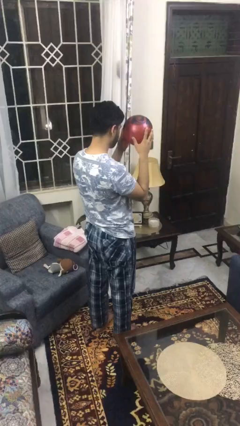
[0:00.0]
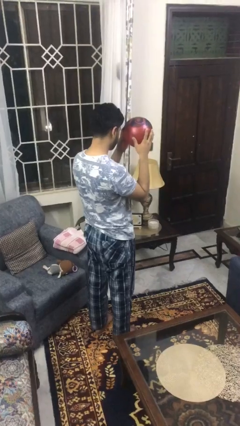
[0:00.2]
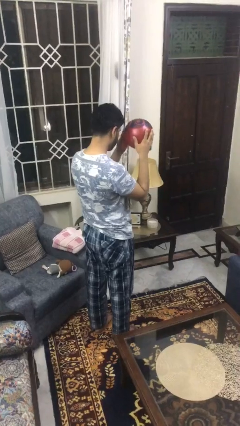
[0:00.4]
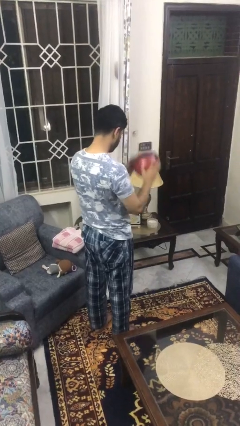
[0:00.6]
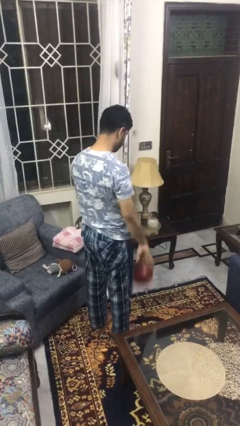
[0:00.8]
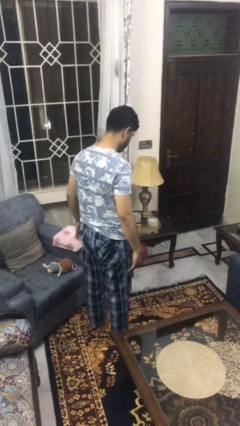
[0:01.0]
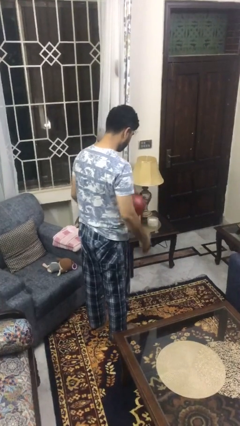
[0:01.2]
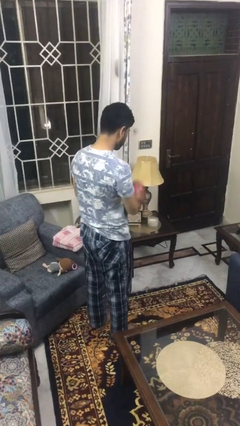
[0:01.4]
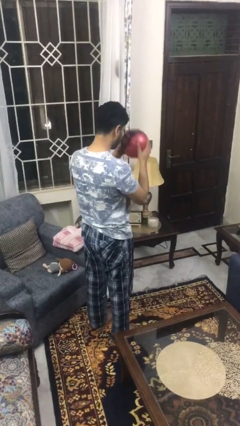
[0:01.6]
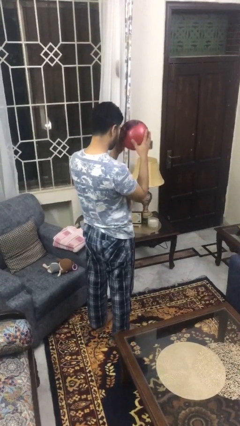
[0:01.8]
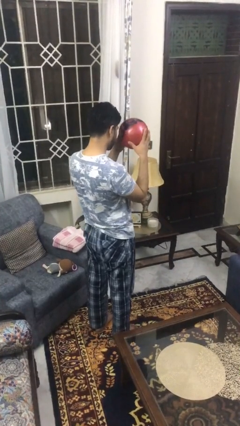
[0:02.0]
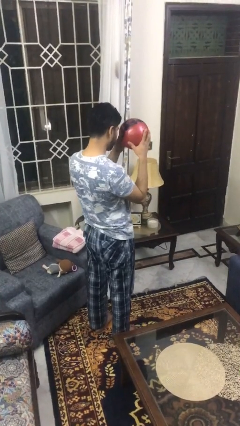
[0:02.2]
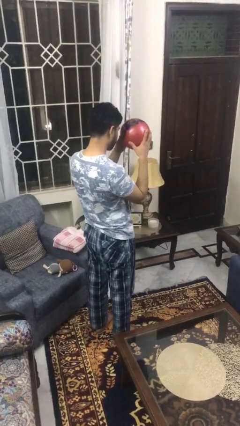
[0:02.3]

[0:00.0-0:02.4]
person bounces ball on floor

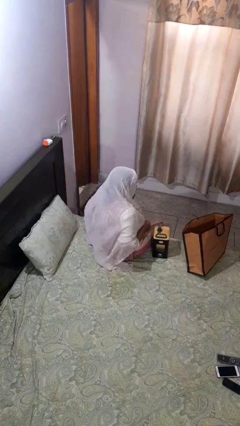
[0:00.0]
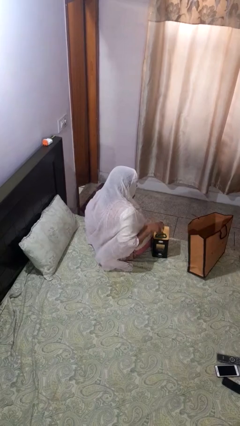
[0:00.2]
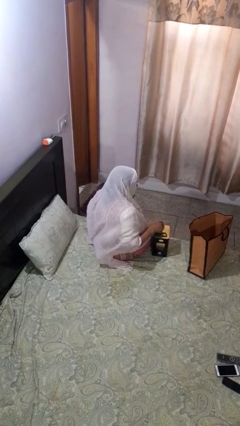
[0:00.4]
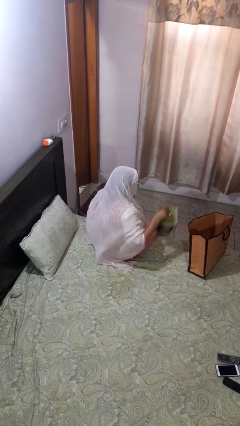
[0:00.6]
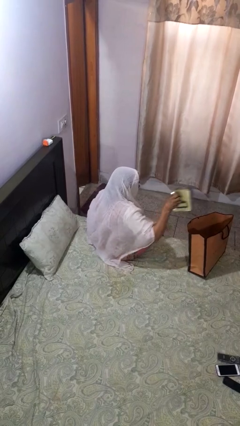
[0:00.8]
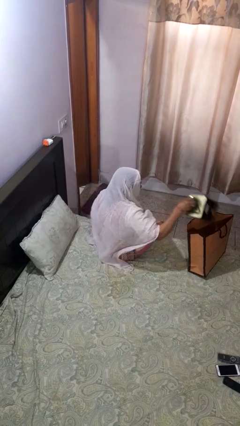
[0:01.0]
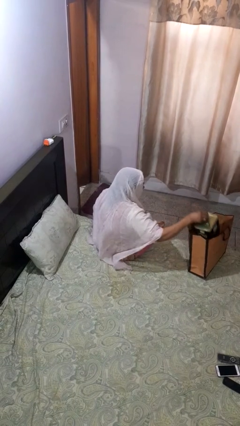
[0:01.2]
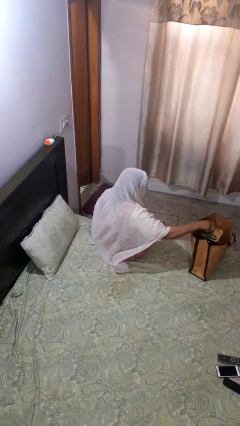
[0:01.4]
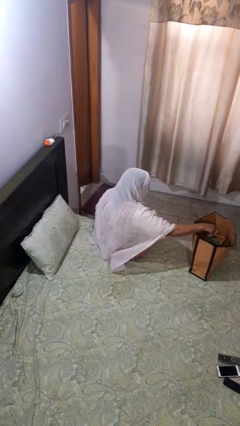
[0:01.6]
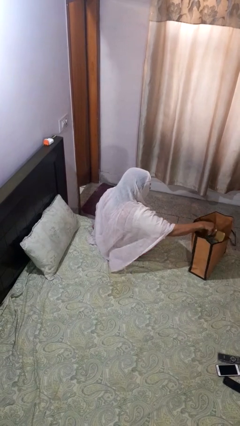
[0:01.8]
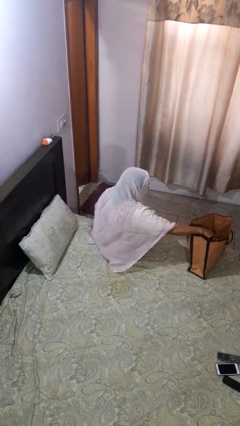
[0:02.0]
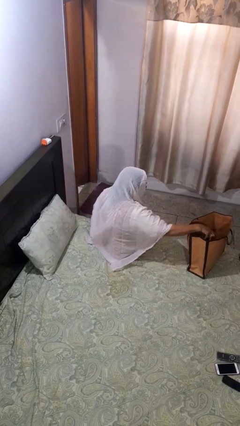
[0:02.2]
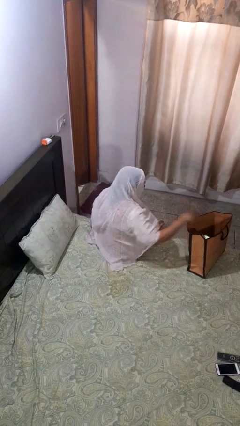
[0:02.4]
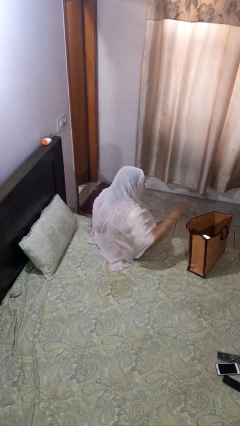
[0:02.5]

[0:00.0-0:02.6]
person puts object into bag

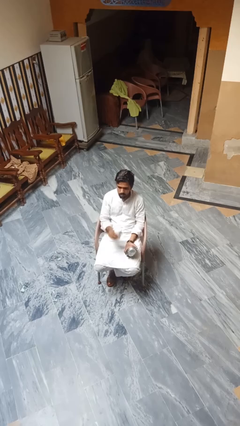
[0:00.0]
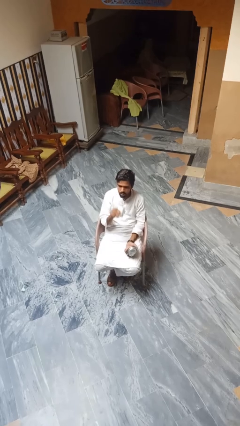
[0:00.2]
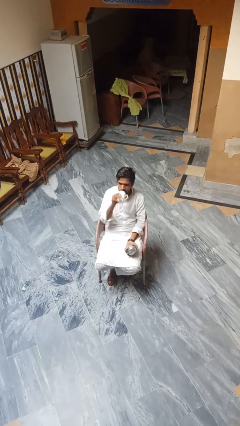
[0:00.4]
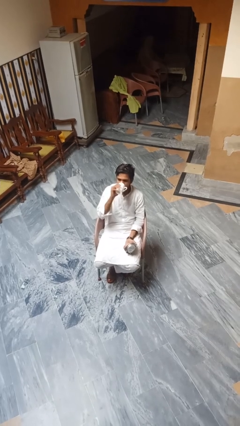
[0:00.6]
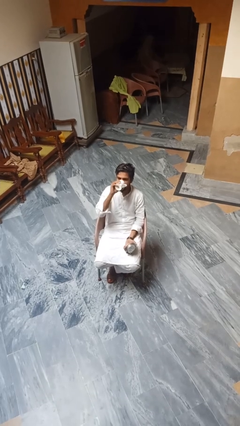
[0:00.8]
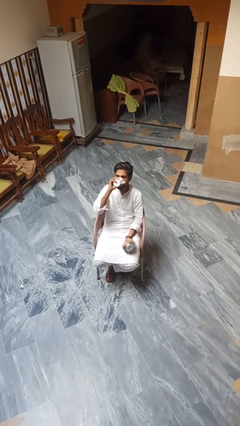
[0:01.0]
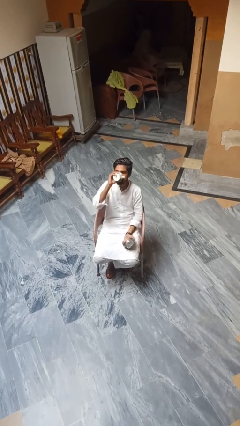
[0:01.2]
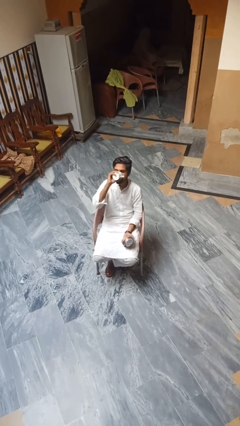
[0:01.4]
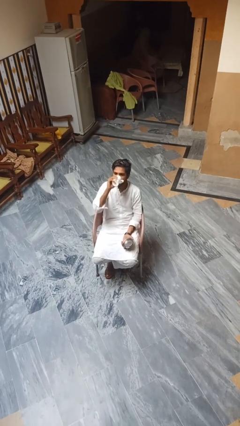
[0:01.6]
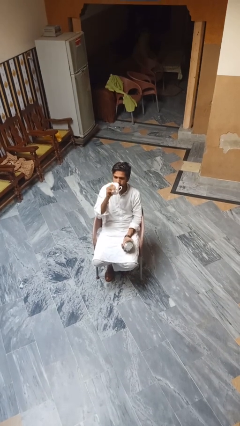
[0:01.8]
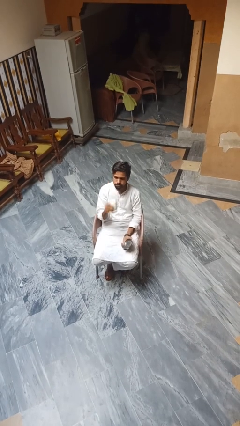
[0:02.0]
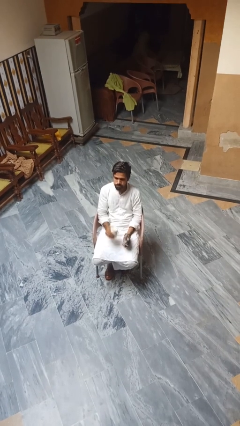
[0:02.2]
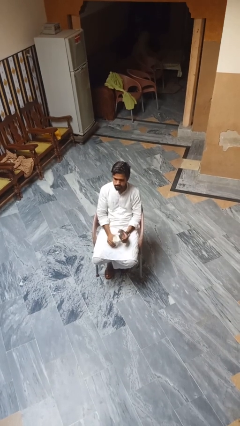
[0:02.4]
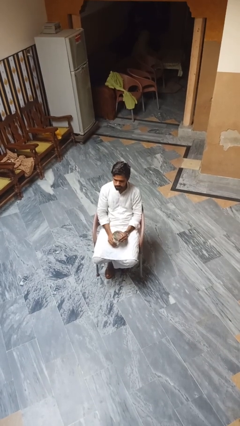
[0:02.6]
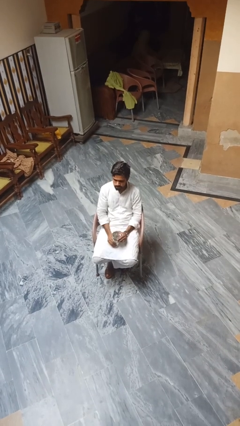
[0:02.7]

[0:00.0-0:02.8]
person drinks from beverage can

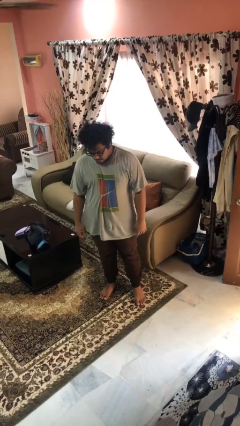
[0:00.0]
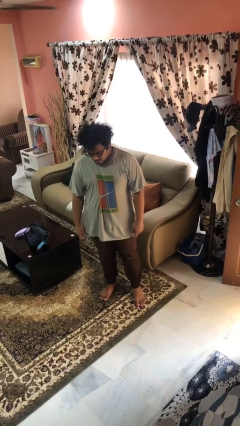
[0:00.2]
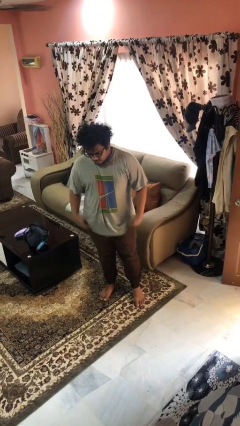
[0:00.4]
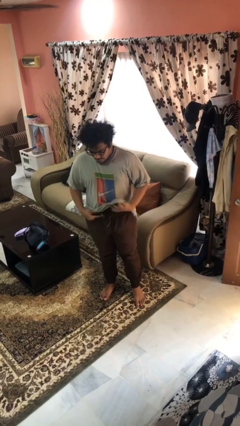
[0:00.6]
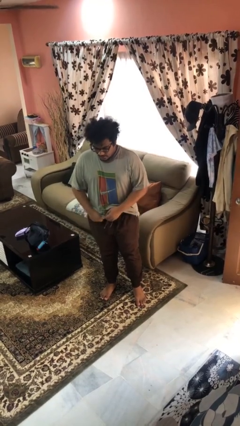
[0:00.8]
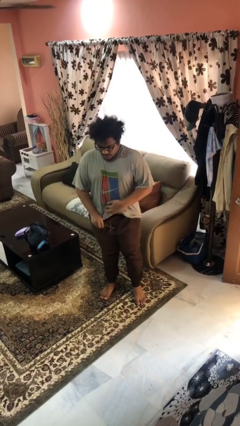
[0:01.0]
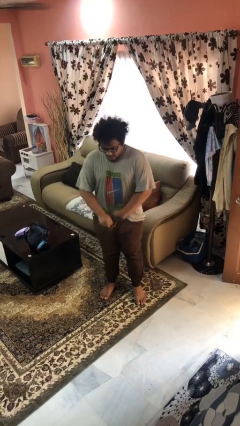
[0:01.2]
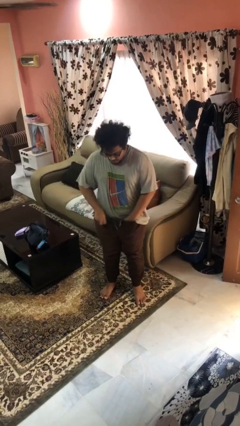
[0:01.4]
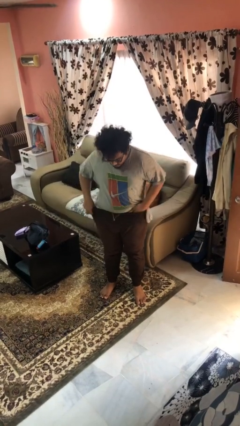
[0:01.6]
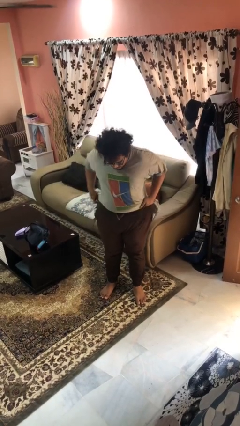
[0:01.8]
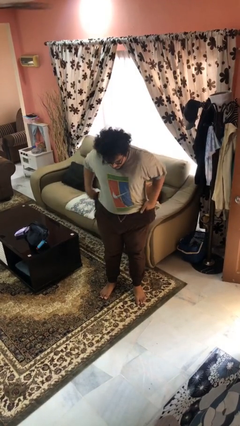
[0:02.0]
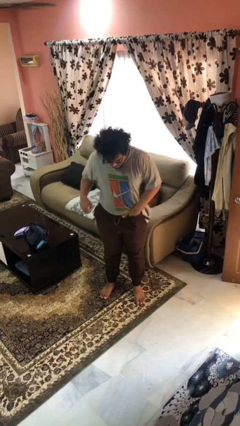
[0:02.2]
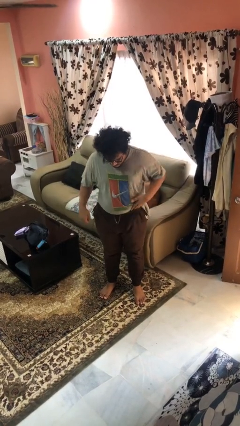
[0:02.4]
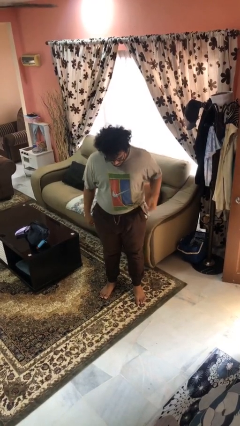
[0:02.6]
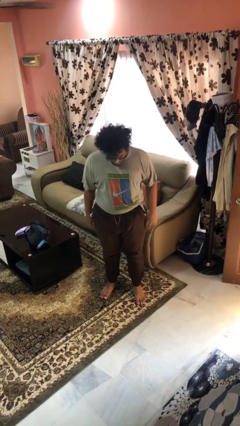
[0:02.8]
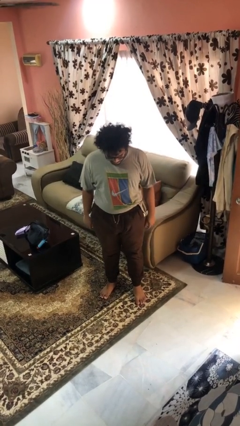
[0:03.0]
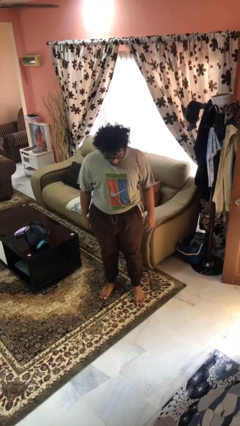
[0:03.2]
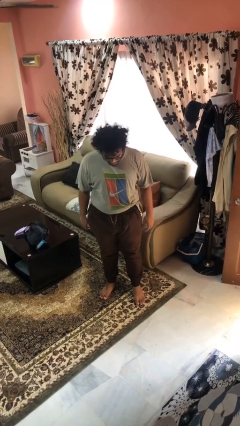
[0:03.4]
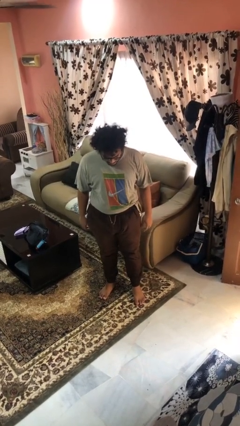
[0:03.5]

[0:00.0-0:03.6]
person tucks in shirt

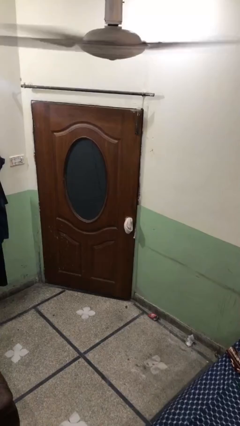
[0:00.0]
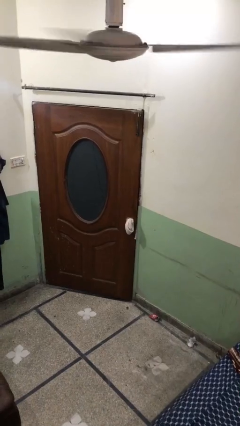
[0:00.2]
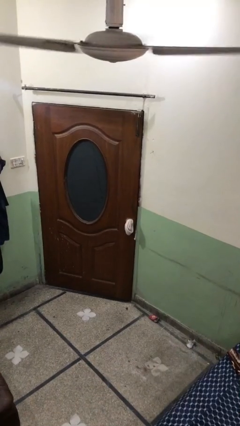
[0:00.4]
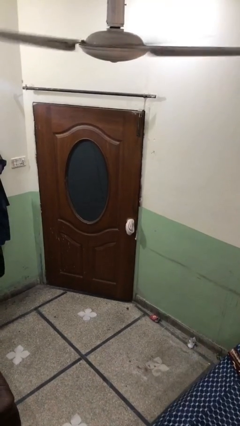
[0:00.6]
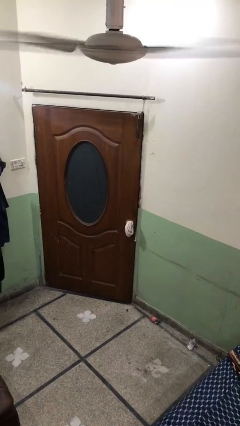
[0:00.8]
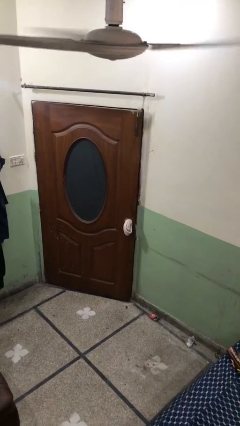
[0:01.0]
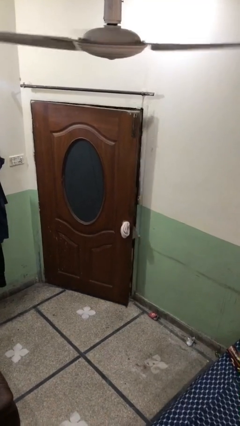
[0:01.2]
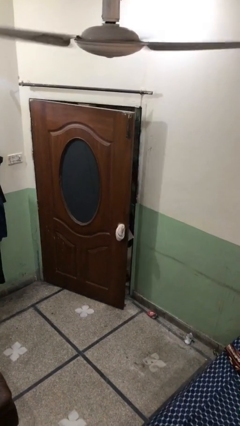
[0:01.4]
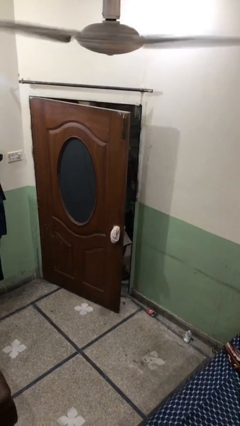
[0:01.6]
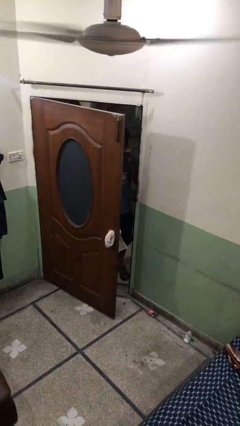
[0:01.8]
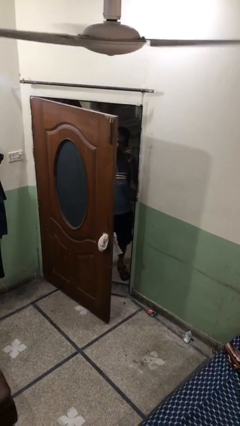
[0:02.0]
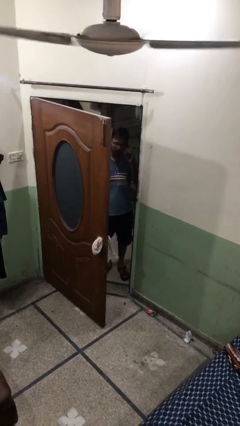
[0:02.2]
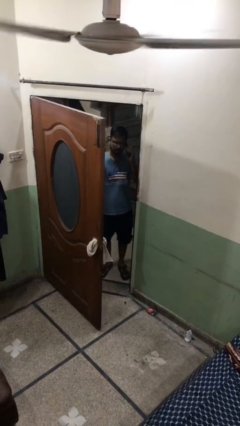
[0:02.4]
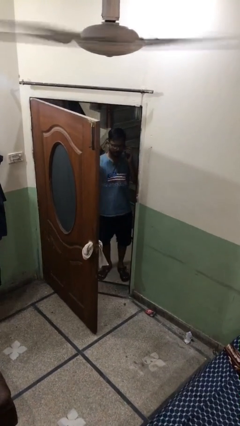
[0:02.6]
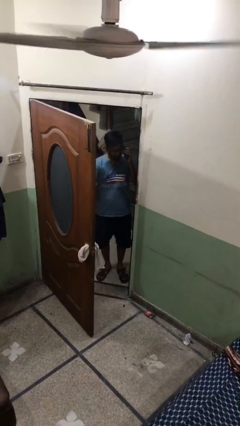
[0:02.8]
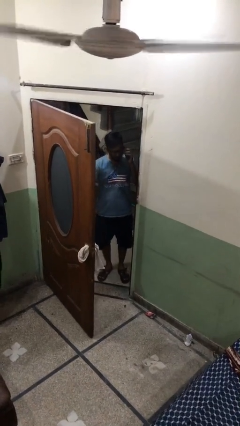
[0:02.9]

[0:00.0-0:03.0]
person opens facility door

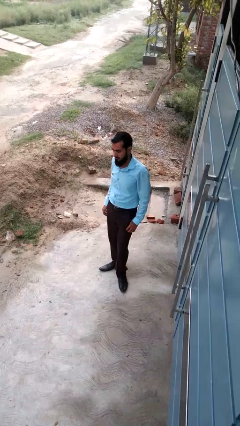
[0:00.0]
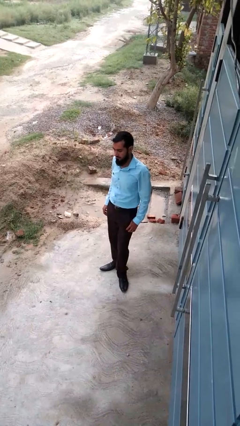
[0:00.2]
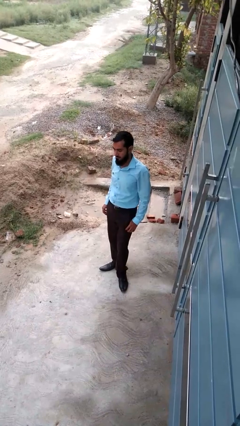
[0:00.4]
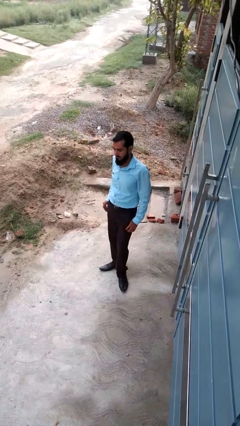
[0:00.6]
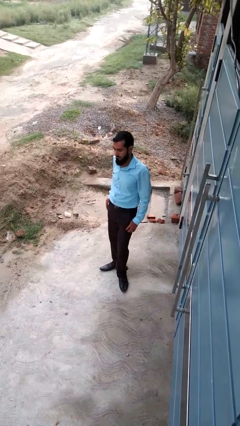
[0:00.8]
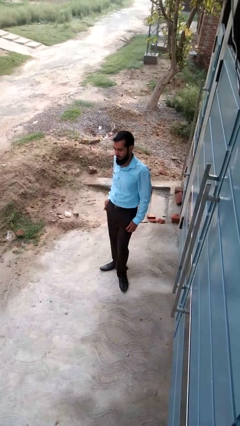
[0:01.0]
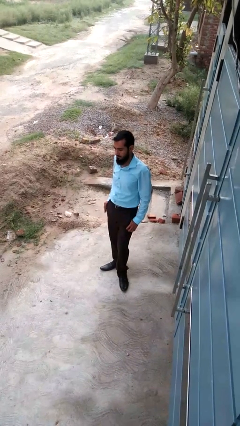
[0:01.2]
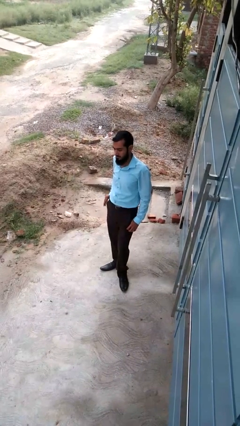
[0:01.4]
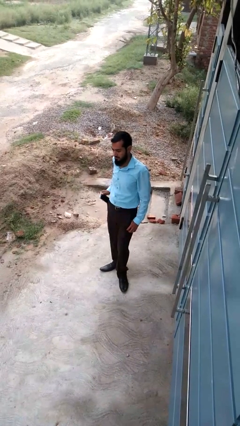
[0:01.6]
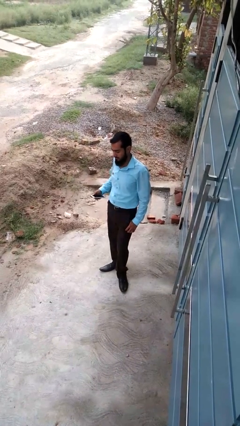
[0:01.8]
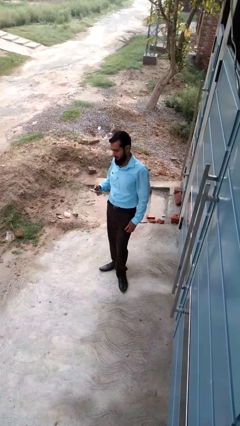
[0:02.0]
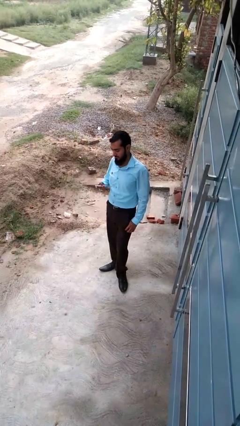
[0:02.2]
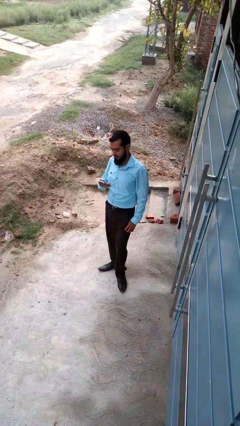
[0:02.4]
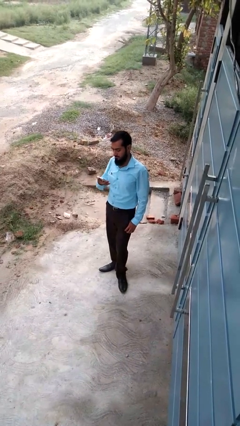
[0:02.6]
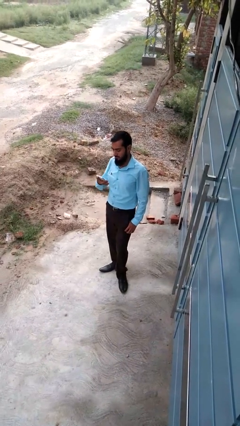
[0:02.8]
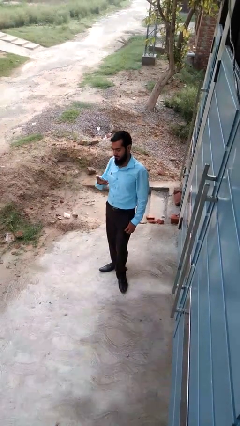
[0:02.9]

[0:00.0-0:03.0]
person takes phone from pocket

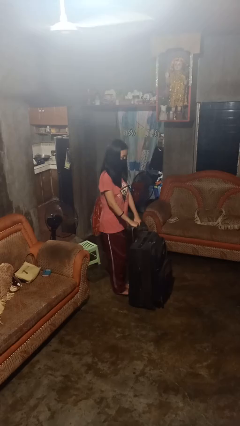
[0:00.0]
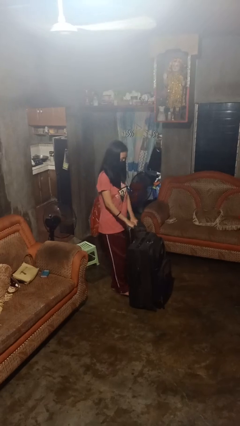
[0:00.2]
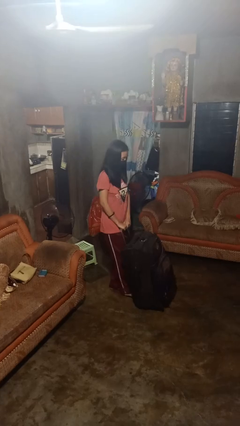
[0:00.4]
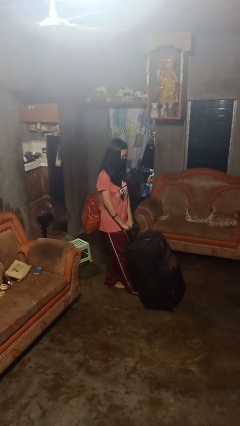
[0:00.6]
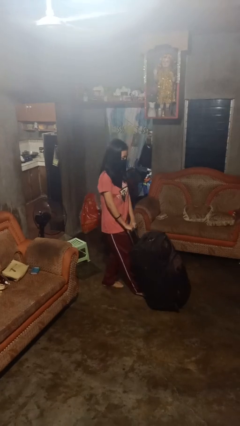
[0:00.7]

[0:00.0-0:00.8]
person pushes wheeled cart
